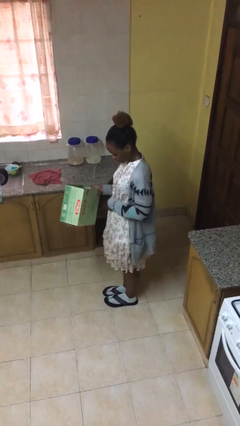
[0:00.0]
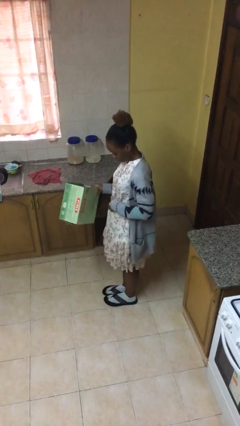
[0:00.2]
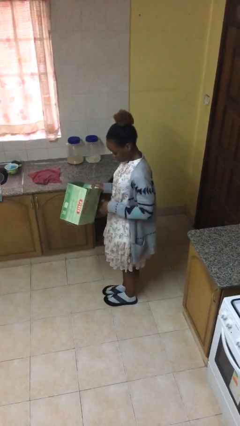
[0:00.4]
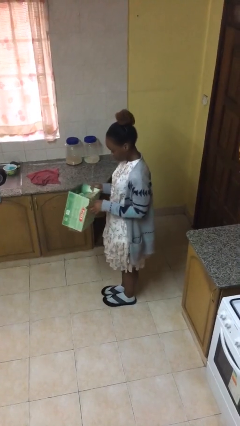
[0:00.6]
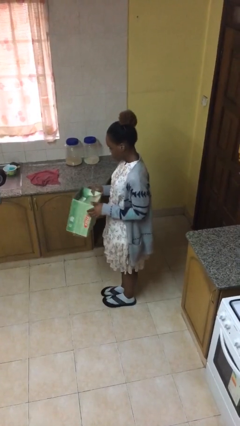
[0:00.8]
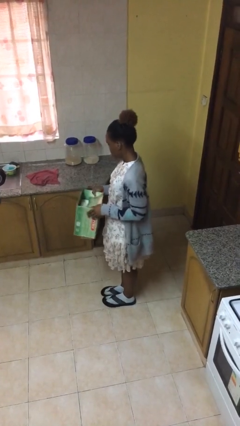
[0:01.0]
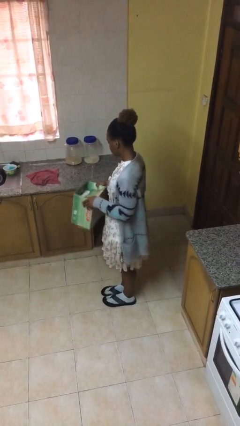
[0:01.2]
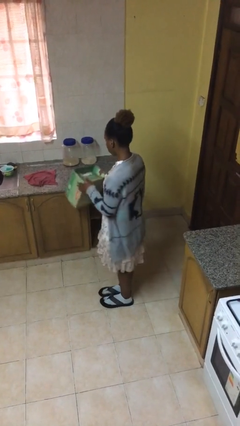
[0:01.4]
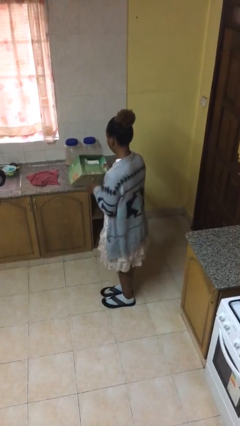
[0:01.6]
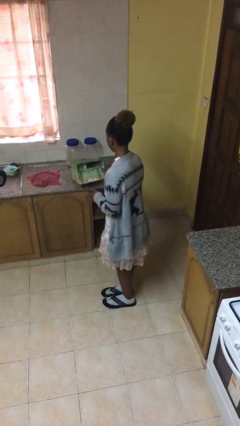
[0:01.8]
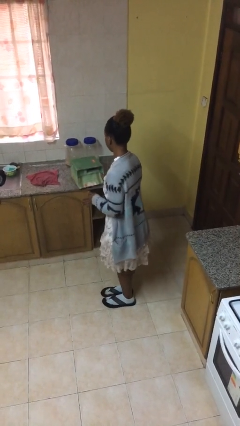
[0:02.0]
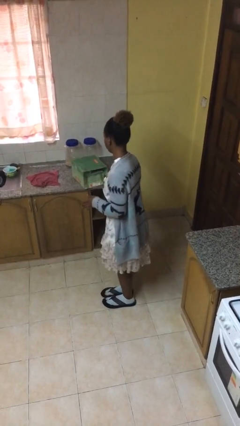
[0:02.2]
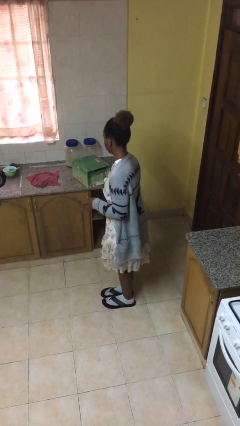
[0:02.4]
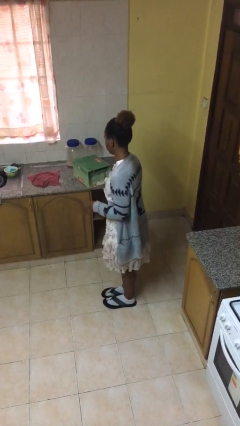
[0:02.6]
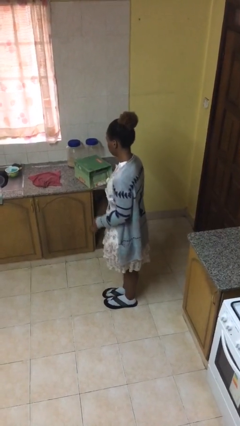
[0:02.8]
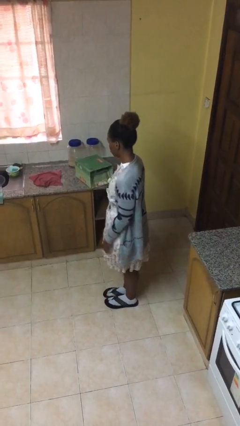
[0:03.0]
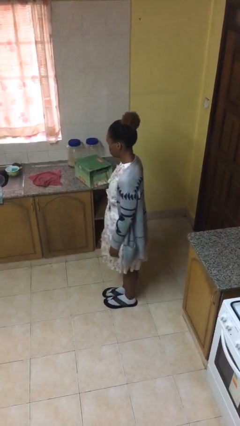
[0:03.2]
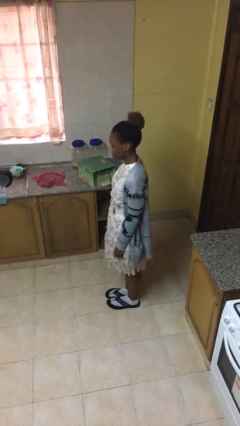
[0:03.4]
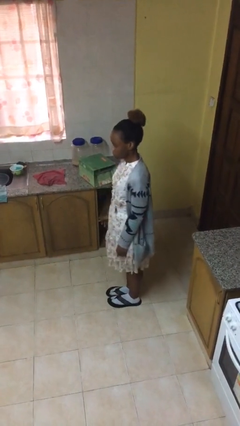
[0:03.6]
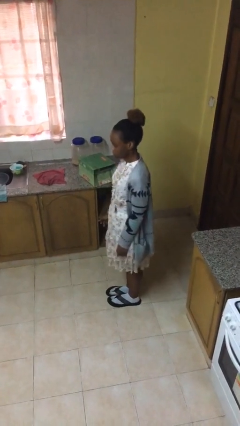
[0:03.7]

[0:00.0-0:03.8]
person puts down object on table

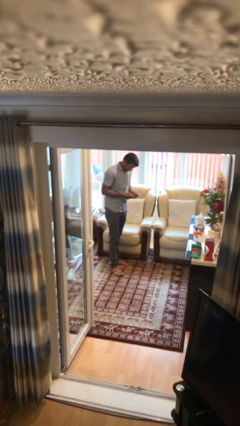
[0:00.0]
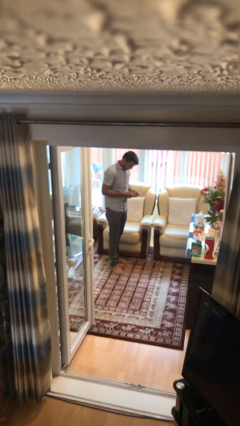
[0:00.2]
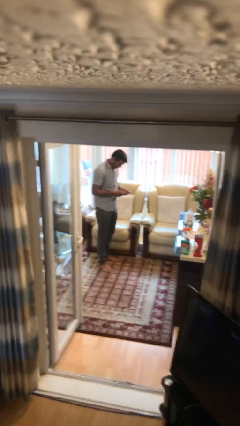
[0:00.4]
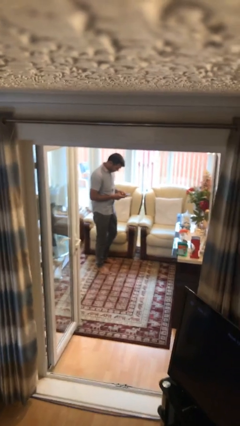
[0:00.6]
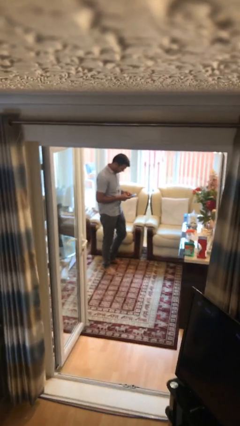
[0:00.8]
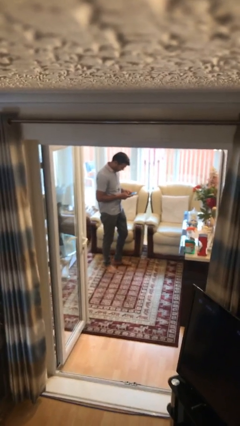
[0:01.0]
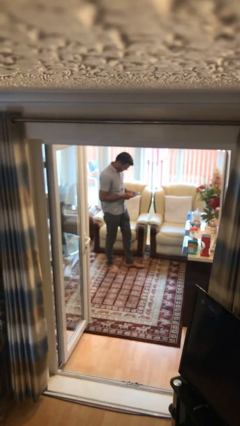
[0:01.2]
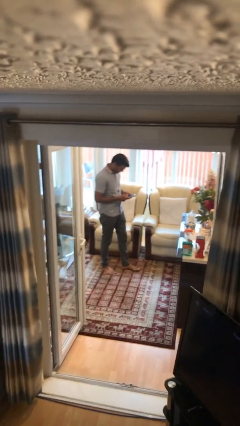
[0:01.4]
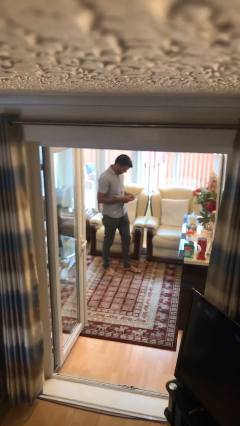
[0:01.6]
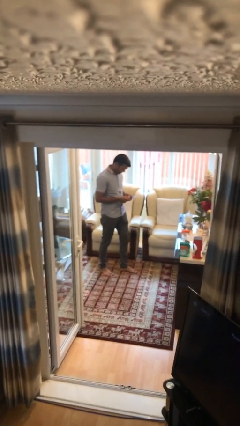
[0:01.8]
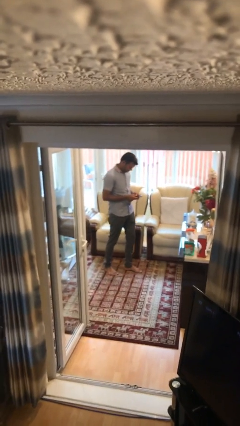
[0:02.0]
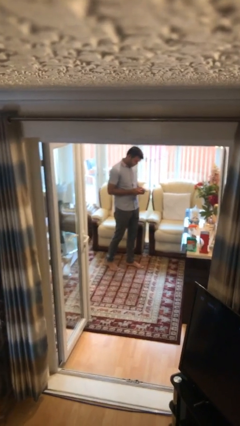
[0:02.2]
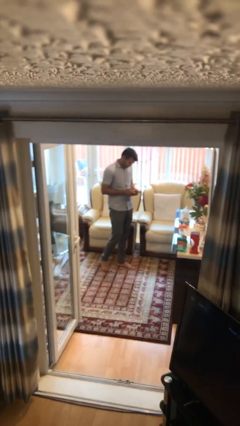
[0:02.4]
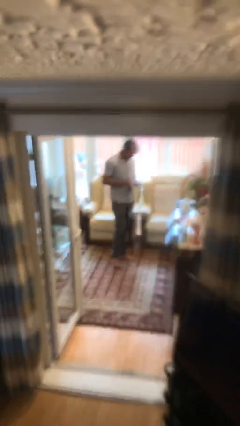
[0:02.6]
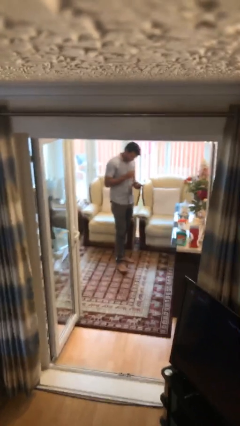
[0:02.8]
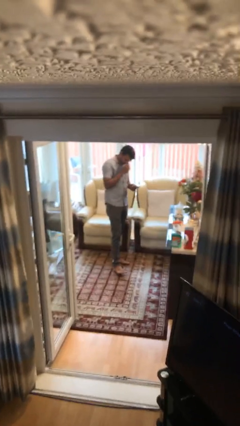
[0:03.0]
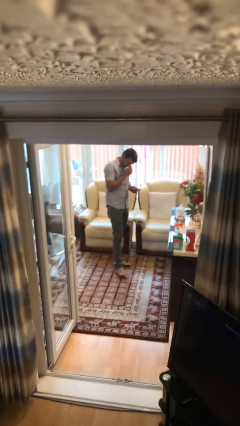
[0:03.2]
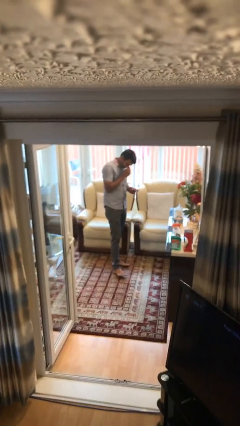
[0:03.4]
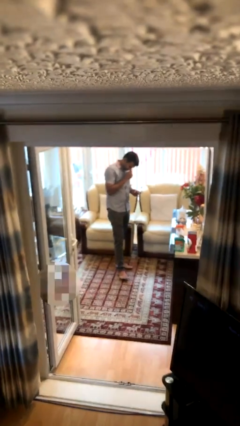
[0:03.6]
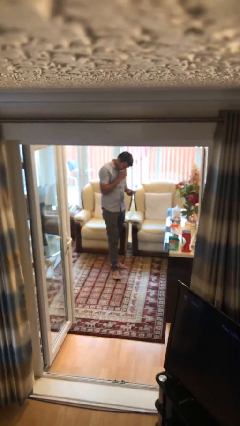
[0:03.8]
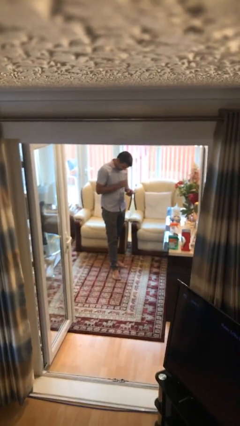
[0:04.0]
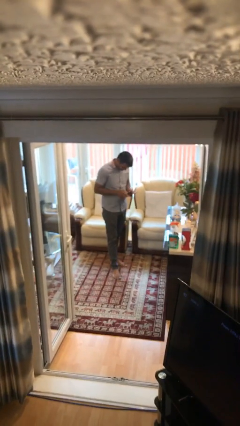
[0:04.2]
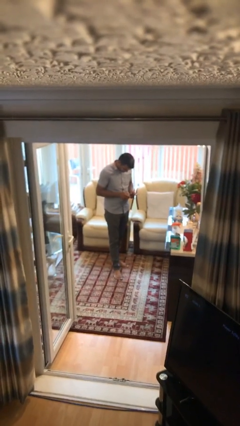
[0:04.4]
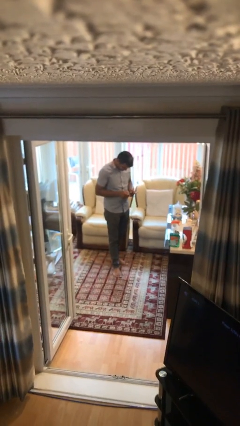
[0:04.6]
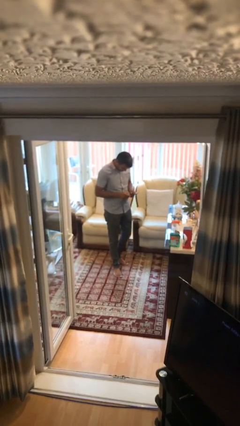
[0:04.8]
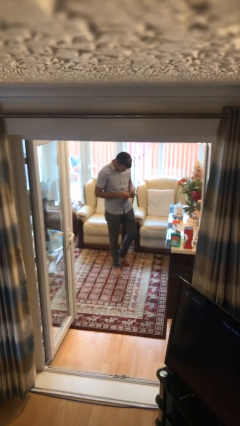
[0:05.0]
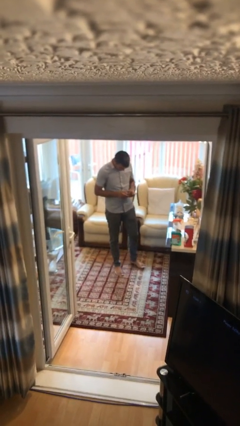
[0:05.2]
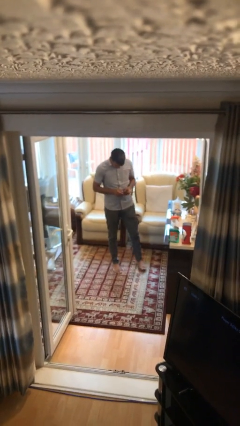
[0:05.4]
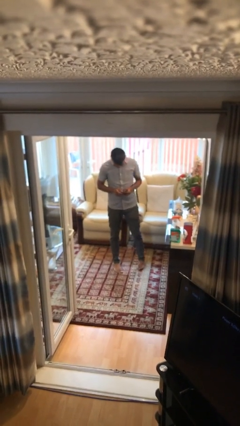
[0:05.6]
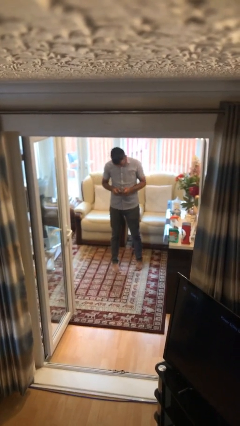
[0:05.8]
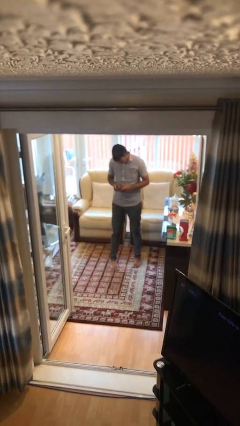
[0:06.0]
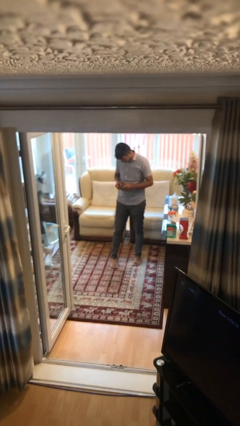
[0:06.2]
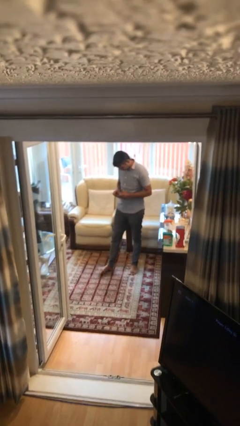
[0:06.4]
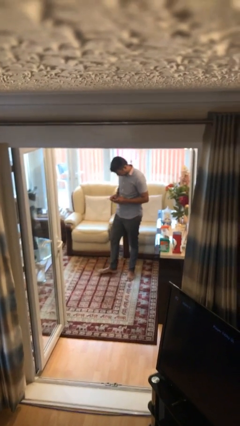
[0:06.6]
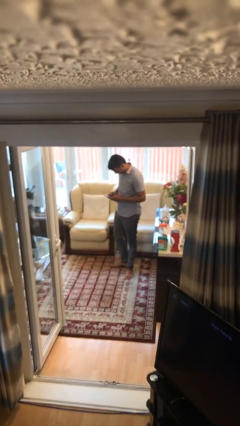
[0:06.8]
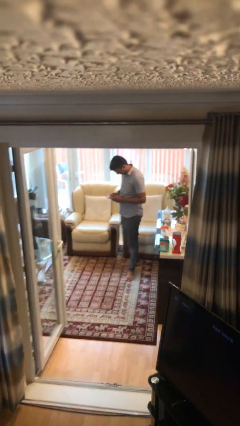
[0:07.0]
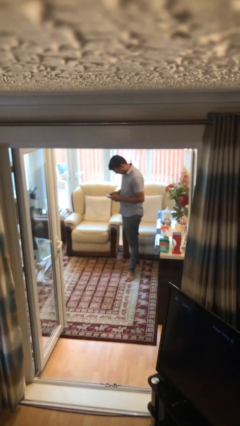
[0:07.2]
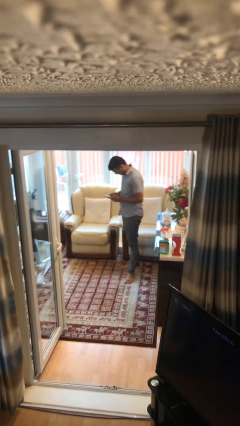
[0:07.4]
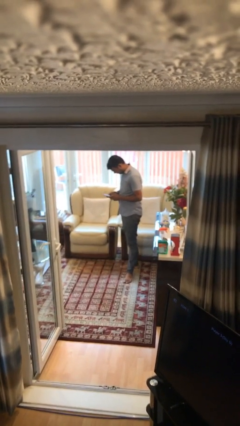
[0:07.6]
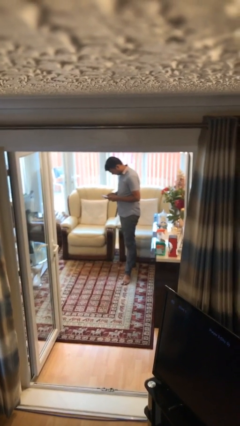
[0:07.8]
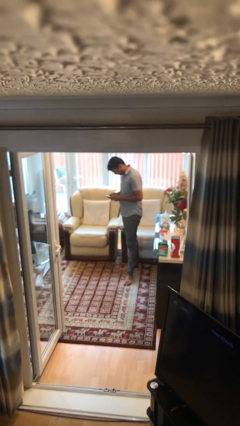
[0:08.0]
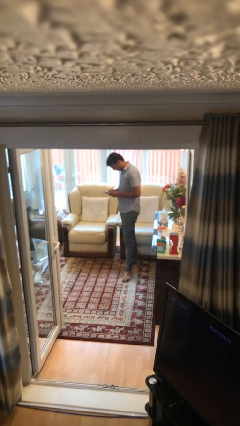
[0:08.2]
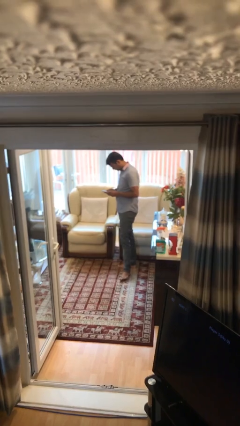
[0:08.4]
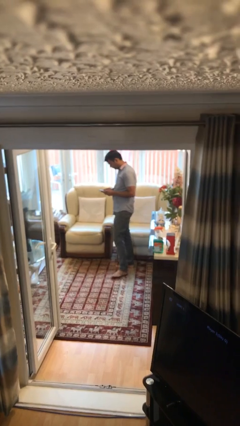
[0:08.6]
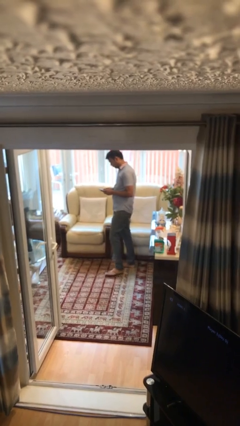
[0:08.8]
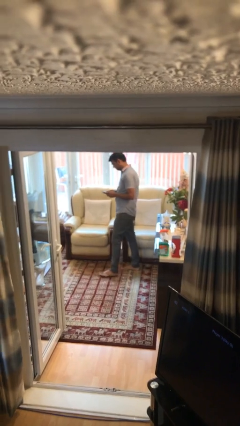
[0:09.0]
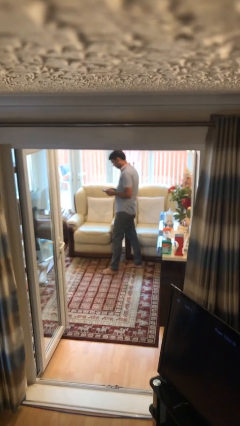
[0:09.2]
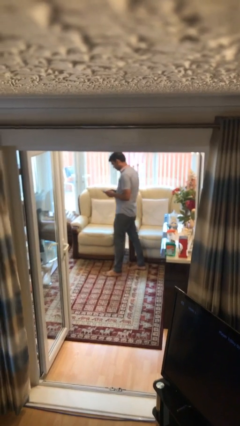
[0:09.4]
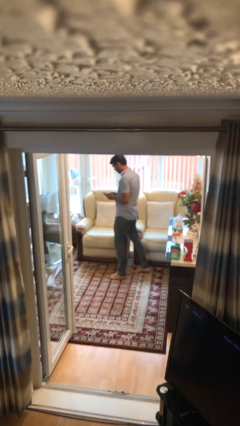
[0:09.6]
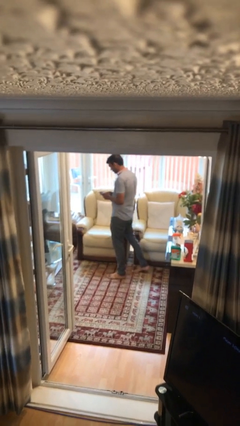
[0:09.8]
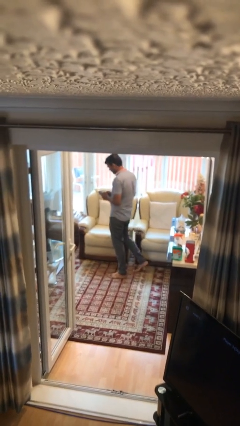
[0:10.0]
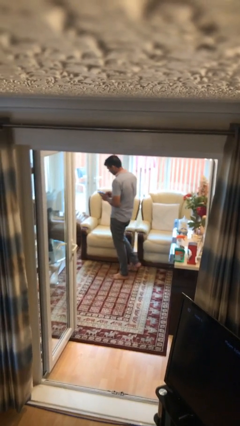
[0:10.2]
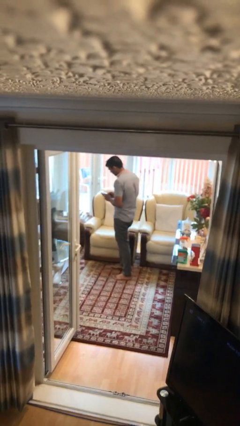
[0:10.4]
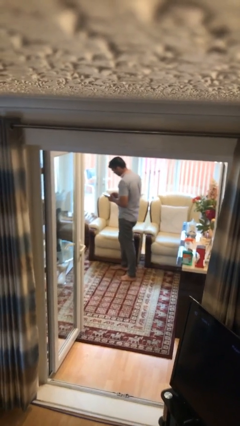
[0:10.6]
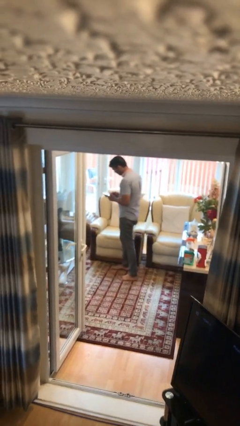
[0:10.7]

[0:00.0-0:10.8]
person texts on phone

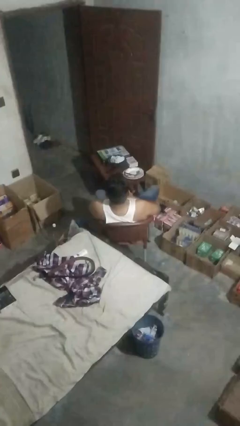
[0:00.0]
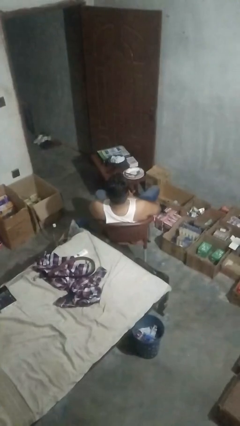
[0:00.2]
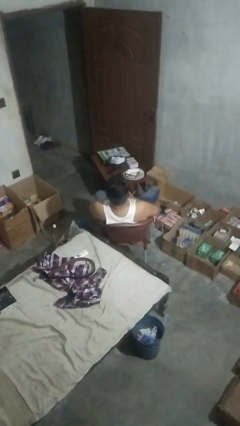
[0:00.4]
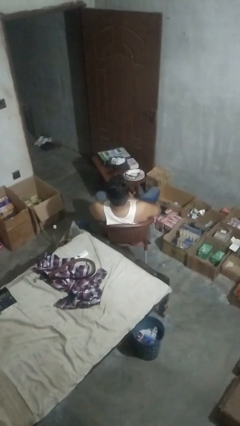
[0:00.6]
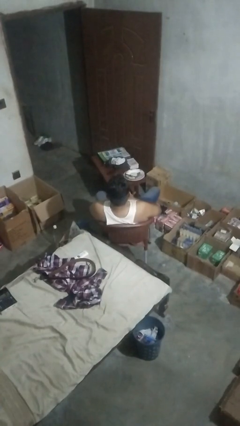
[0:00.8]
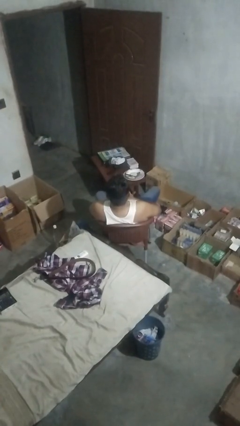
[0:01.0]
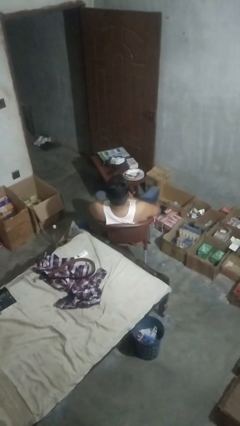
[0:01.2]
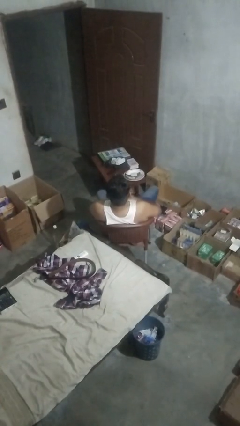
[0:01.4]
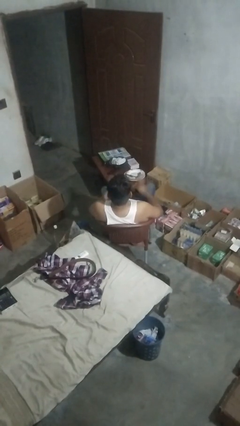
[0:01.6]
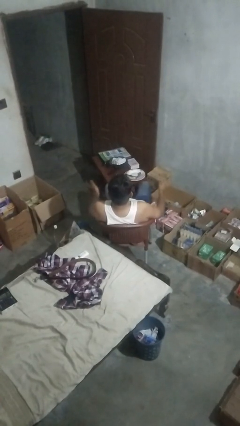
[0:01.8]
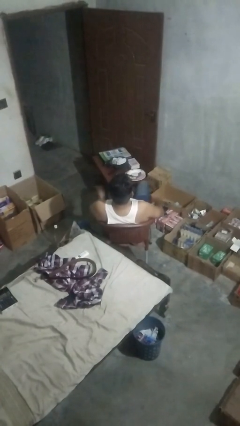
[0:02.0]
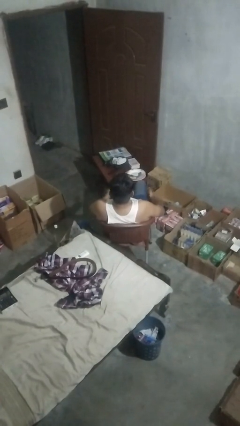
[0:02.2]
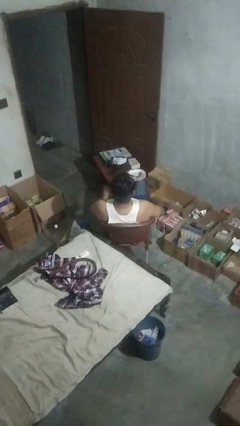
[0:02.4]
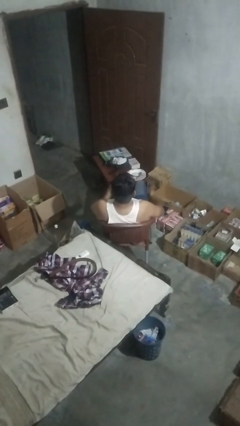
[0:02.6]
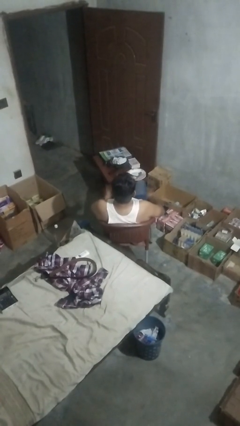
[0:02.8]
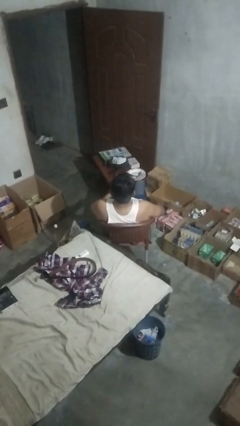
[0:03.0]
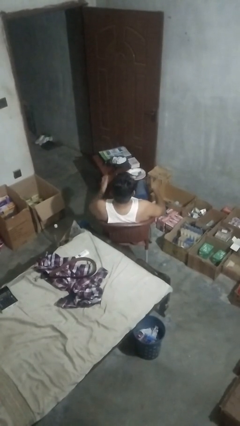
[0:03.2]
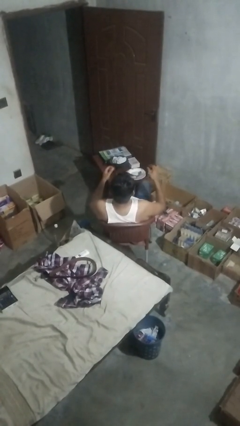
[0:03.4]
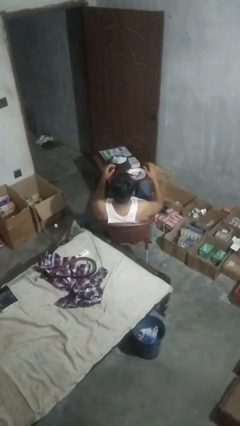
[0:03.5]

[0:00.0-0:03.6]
person slaps hands on thighs

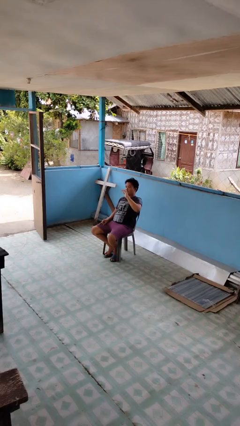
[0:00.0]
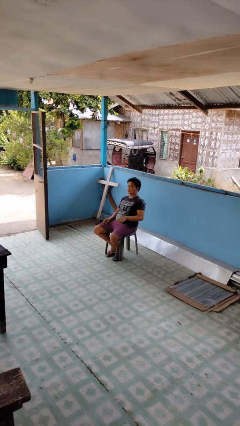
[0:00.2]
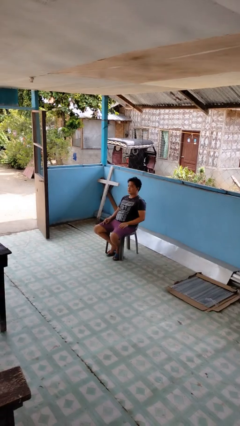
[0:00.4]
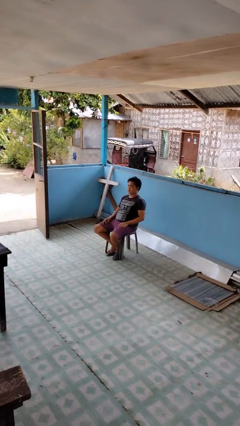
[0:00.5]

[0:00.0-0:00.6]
person gestures lower hand
